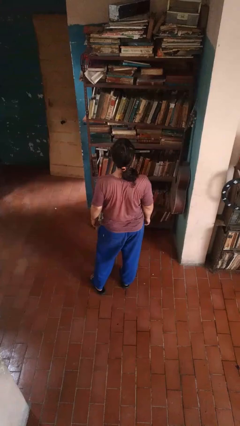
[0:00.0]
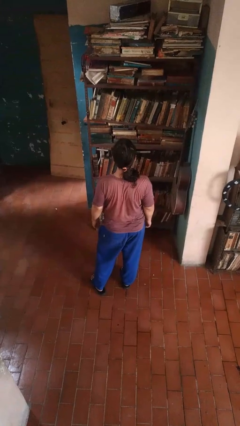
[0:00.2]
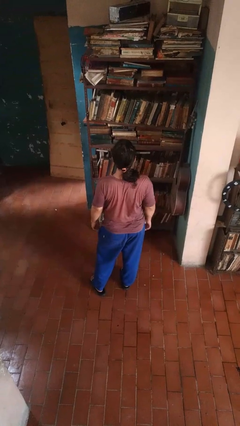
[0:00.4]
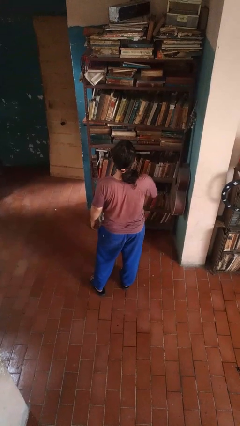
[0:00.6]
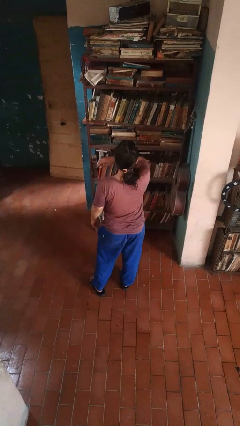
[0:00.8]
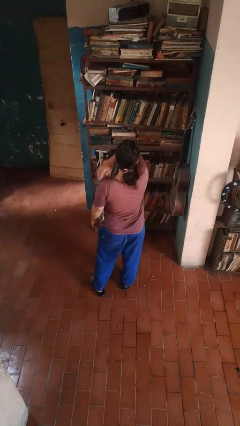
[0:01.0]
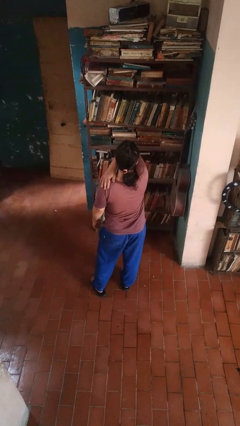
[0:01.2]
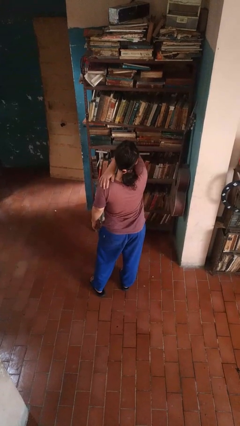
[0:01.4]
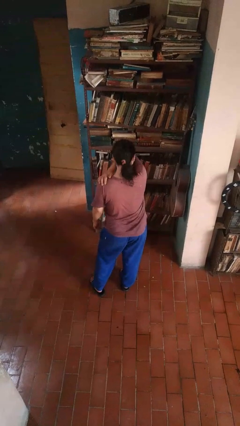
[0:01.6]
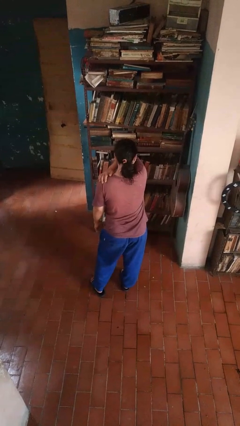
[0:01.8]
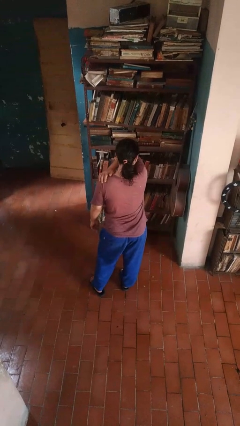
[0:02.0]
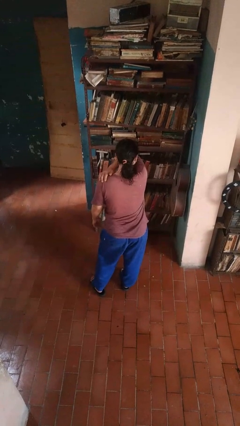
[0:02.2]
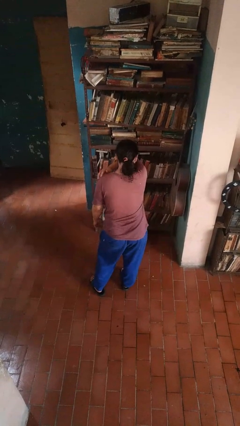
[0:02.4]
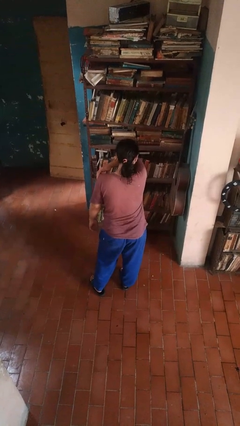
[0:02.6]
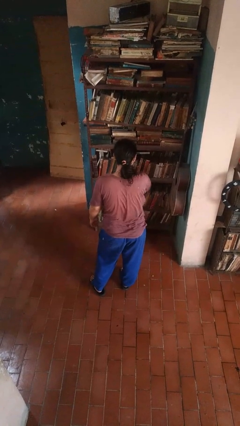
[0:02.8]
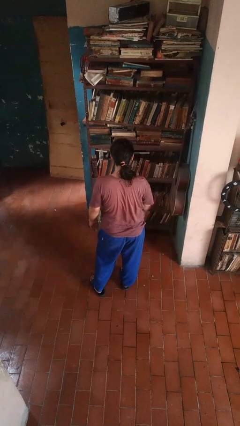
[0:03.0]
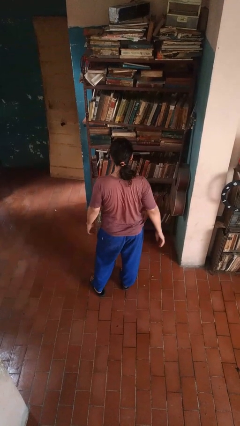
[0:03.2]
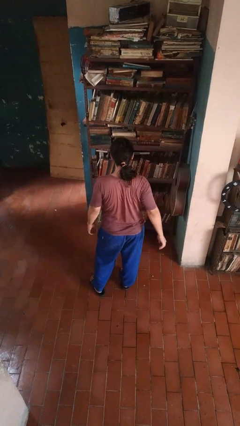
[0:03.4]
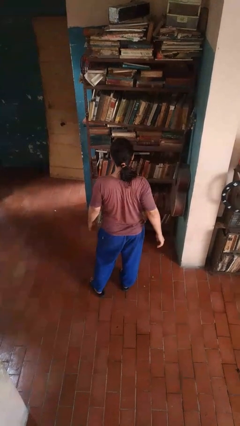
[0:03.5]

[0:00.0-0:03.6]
person sneezes into arm

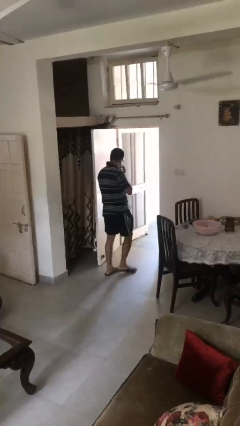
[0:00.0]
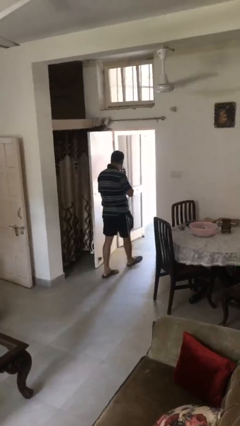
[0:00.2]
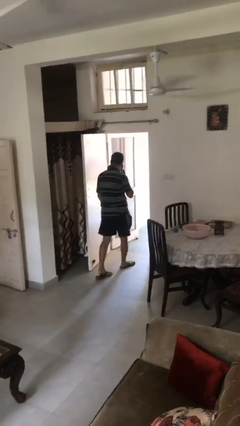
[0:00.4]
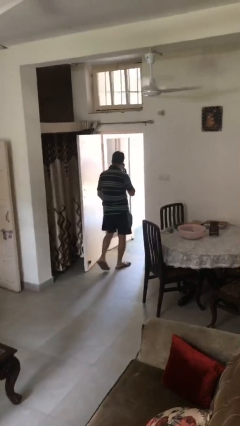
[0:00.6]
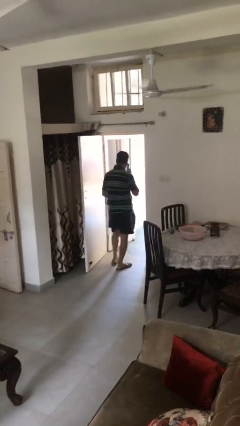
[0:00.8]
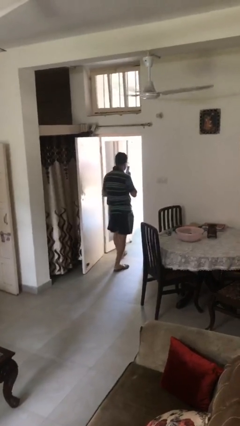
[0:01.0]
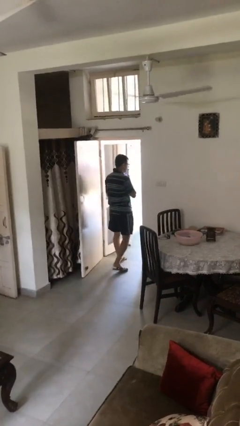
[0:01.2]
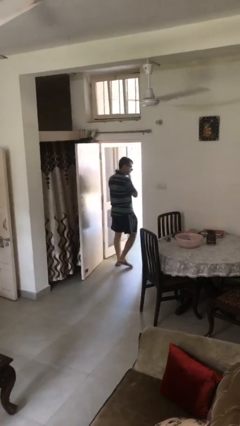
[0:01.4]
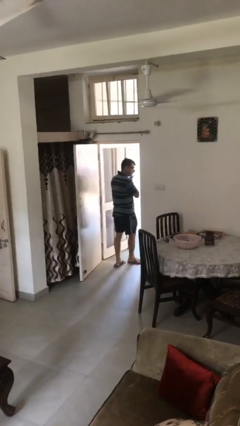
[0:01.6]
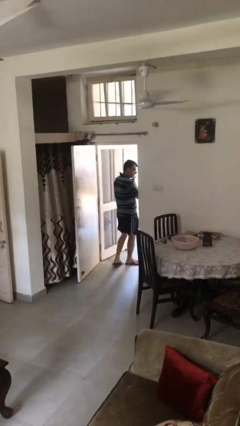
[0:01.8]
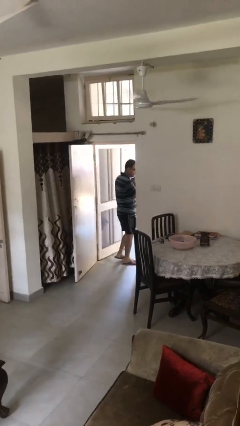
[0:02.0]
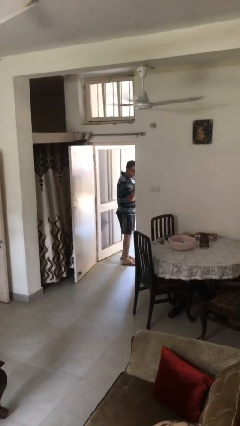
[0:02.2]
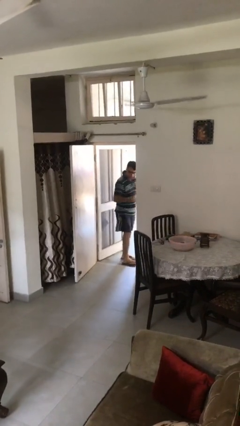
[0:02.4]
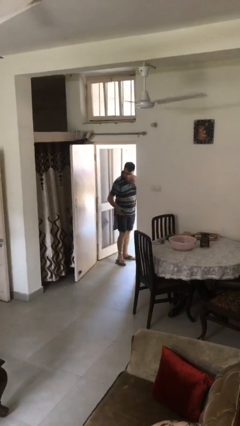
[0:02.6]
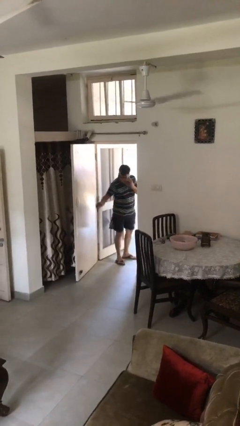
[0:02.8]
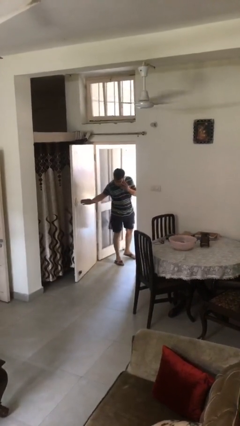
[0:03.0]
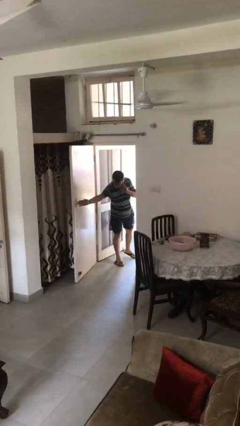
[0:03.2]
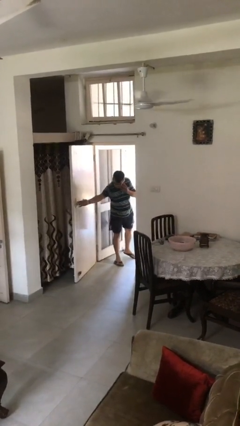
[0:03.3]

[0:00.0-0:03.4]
person exits scene through structure

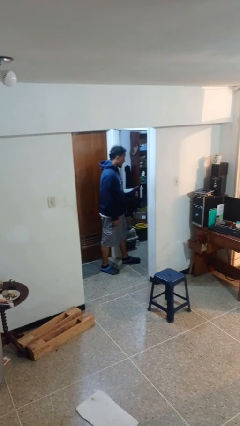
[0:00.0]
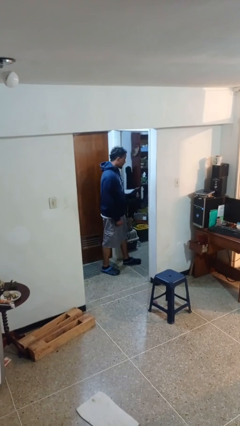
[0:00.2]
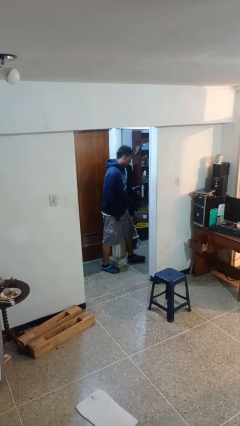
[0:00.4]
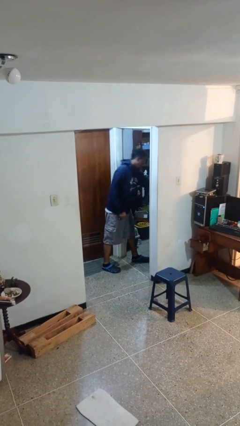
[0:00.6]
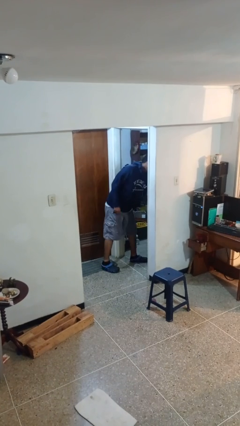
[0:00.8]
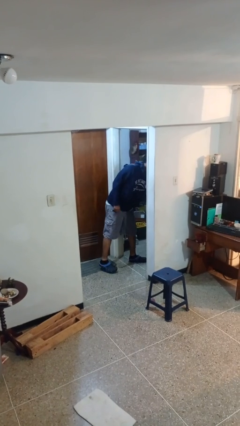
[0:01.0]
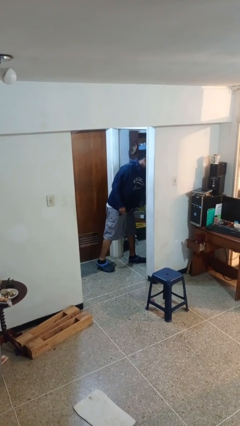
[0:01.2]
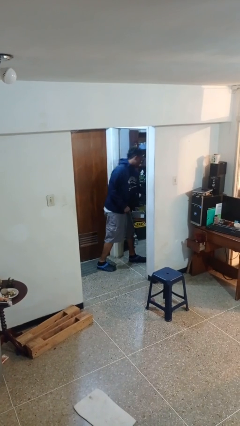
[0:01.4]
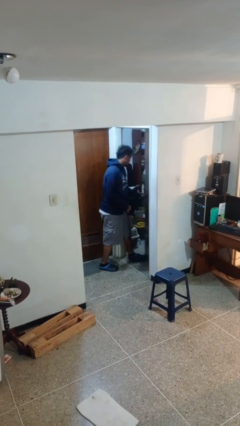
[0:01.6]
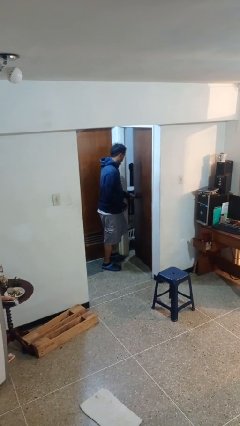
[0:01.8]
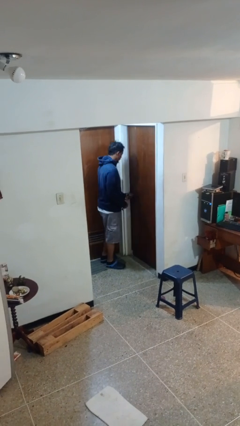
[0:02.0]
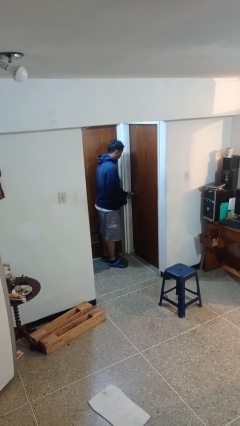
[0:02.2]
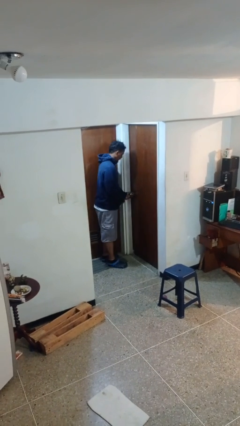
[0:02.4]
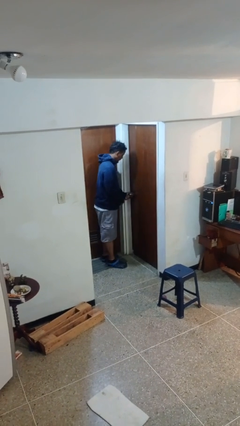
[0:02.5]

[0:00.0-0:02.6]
person closes facility door

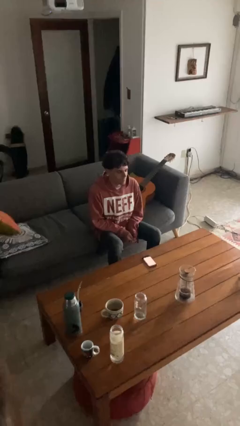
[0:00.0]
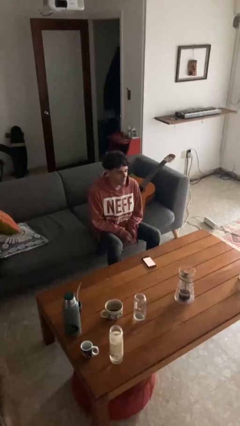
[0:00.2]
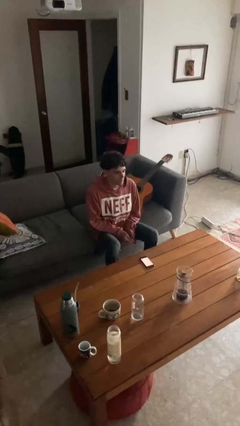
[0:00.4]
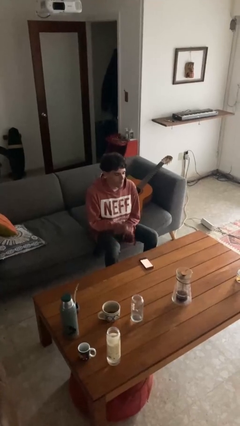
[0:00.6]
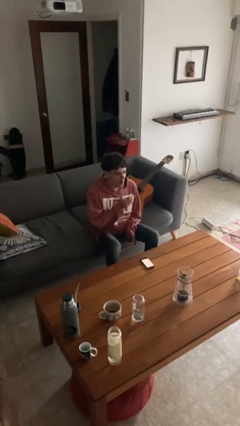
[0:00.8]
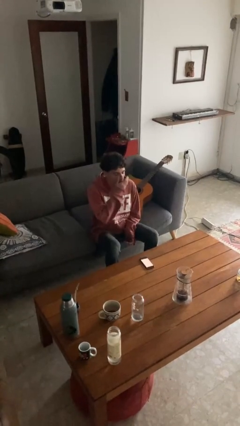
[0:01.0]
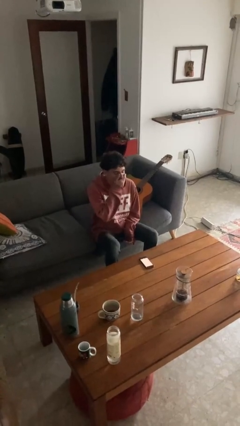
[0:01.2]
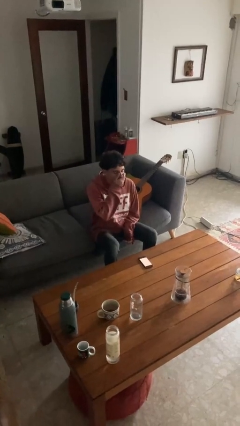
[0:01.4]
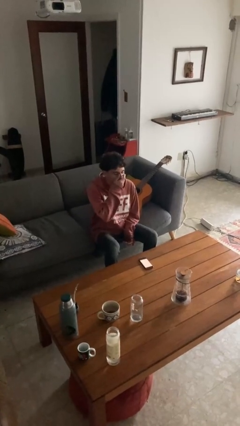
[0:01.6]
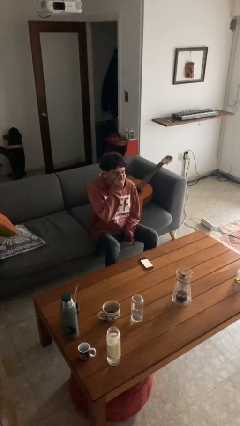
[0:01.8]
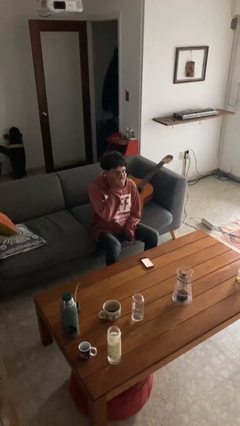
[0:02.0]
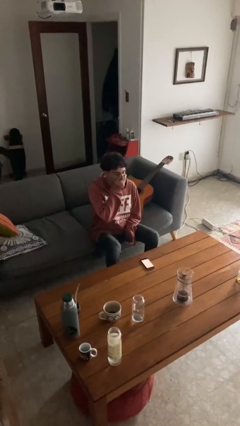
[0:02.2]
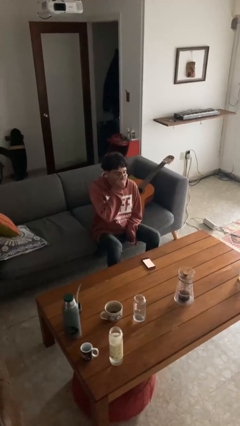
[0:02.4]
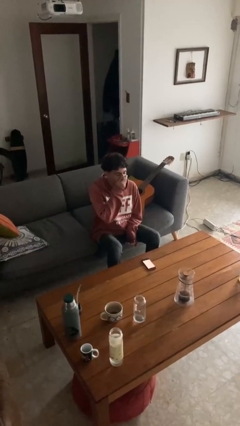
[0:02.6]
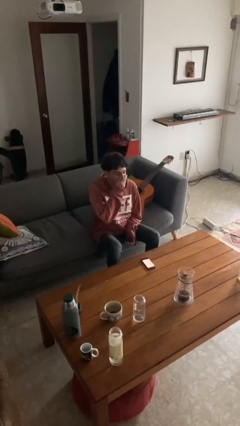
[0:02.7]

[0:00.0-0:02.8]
person yawns

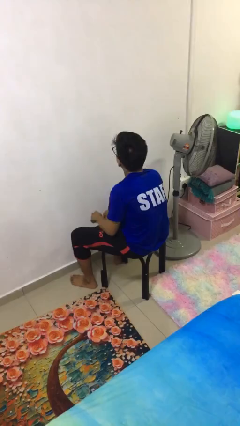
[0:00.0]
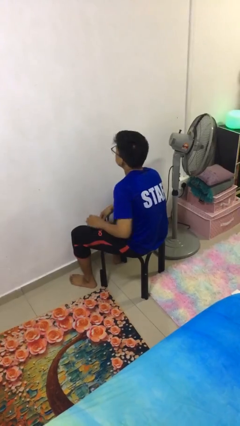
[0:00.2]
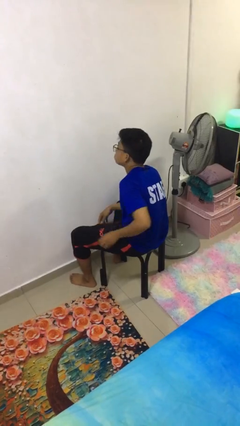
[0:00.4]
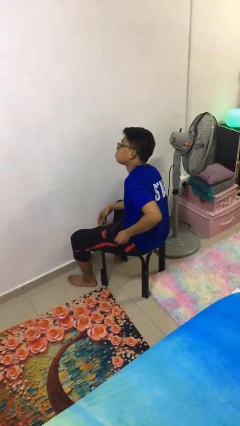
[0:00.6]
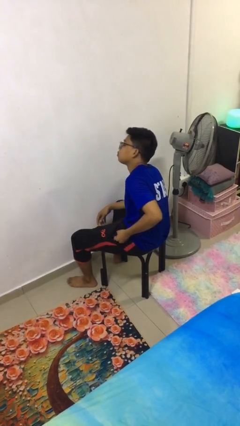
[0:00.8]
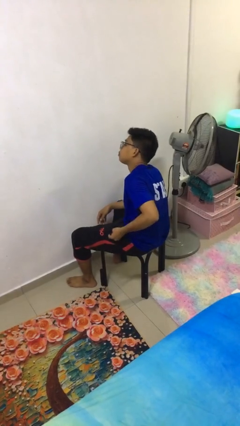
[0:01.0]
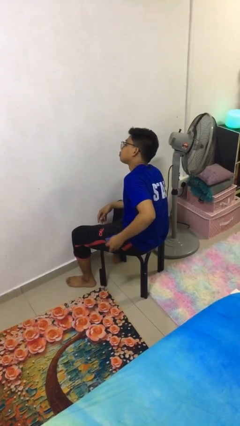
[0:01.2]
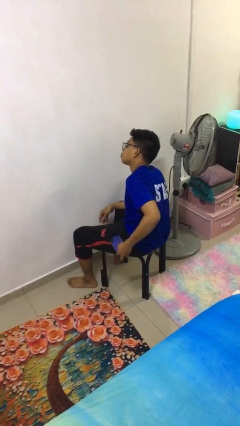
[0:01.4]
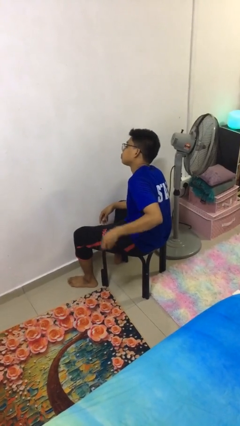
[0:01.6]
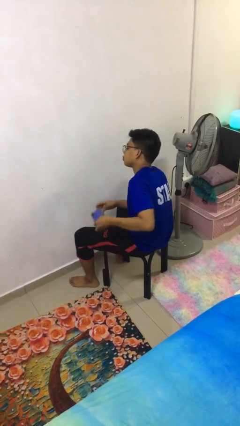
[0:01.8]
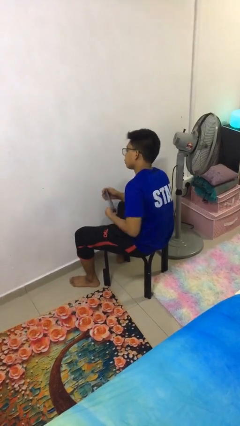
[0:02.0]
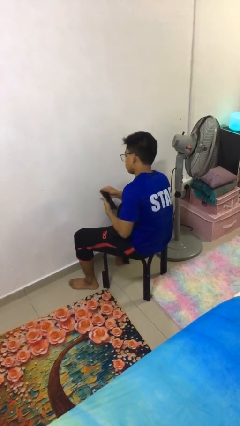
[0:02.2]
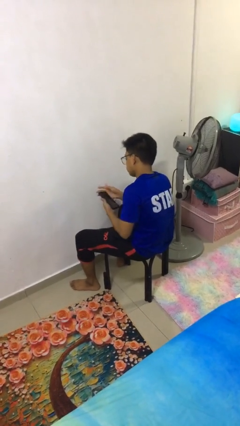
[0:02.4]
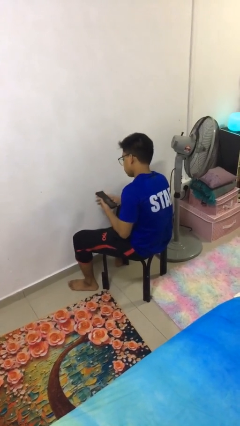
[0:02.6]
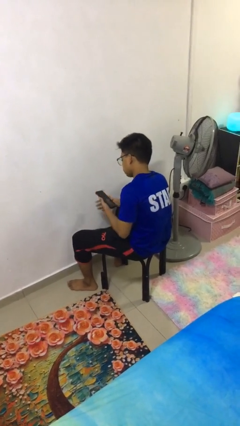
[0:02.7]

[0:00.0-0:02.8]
person takes phone from pocket

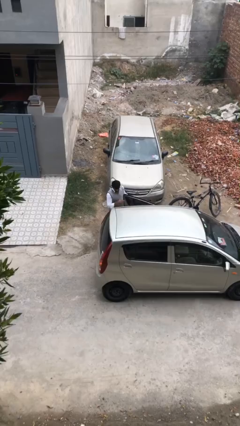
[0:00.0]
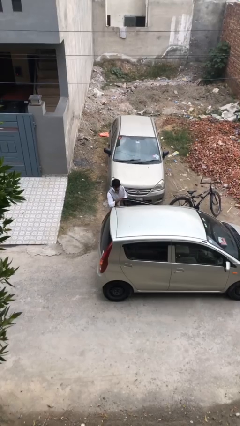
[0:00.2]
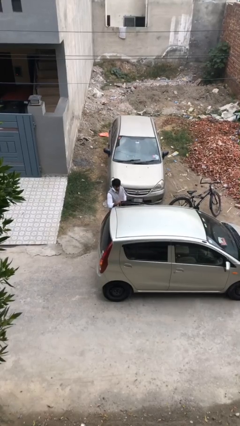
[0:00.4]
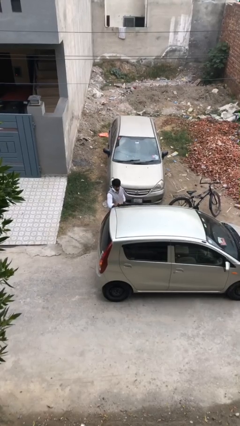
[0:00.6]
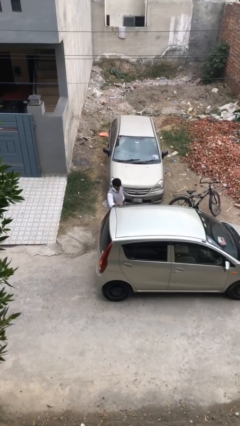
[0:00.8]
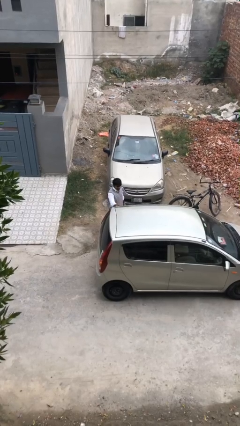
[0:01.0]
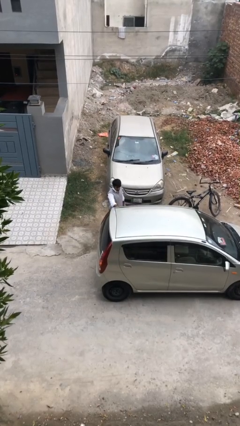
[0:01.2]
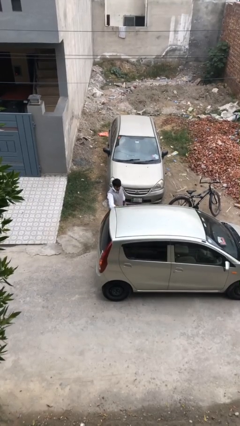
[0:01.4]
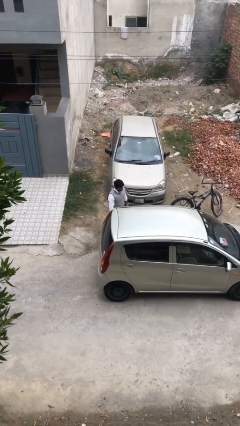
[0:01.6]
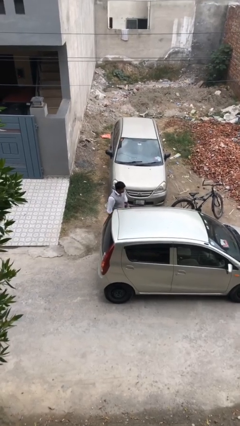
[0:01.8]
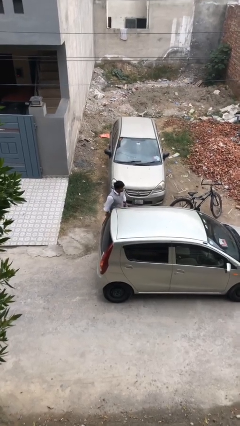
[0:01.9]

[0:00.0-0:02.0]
person closes car door
